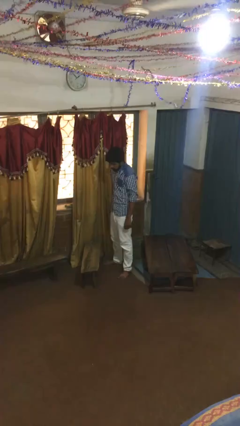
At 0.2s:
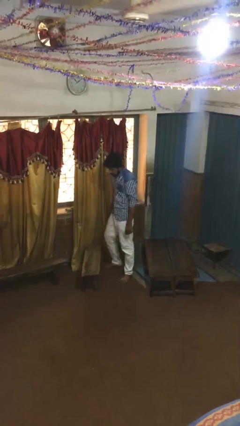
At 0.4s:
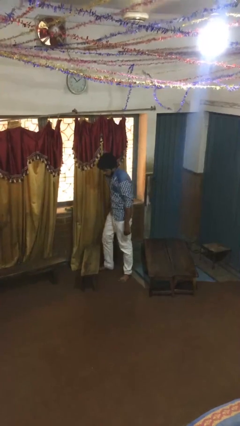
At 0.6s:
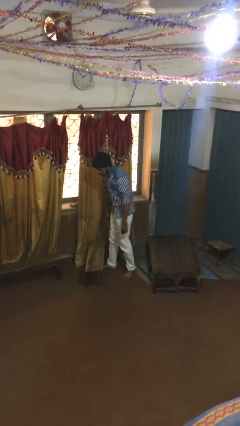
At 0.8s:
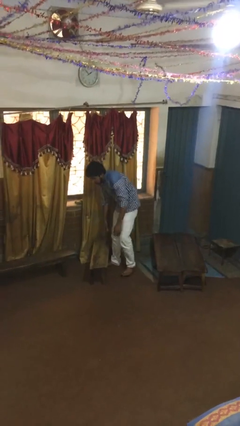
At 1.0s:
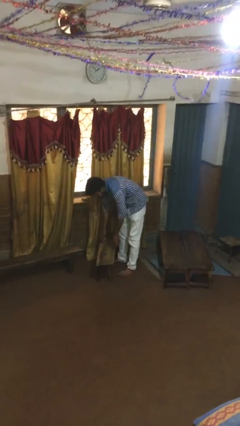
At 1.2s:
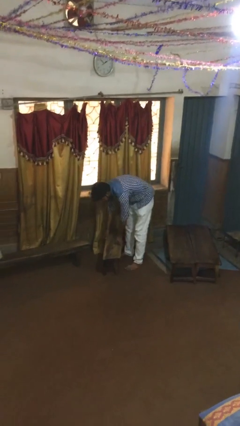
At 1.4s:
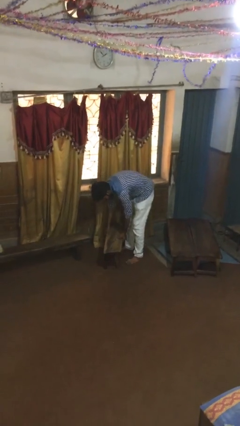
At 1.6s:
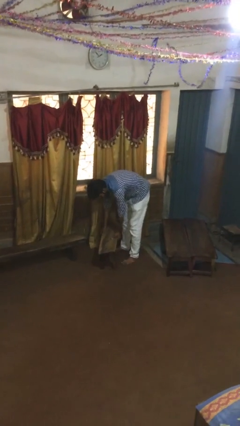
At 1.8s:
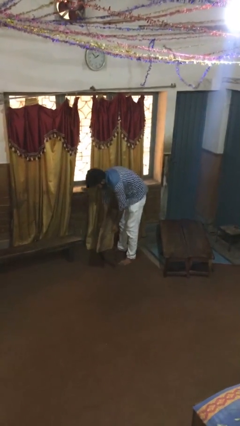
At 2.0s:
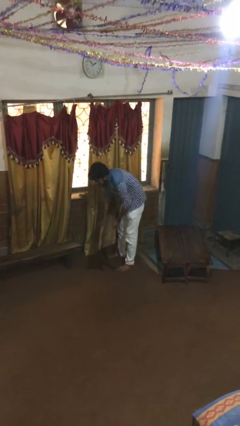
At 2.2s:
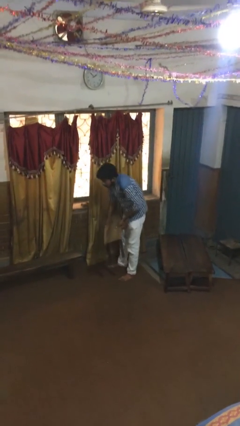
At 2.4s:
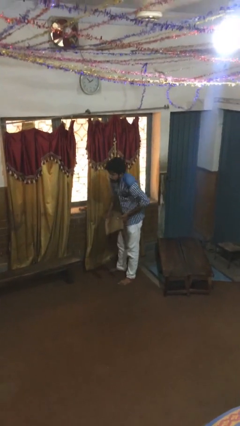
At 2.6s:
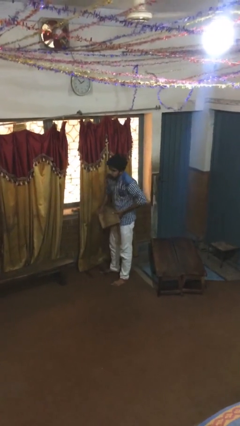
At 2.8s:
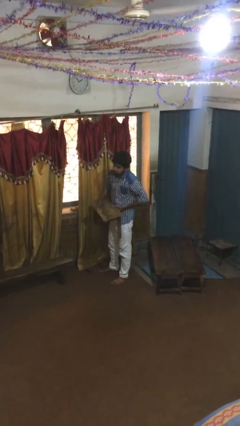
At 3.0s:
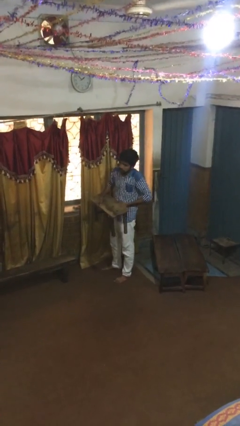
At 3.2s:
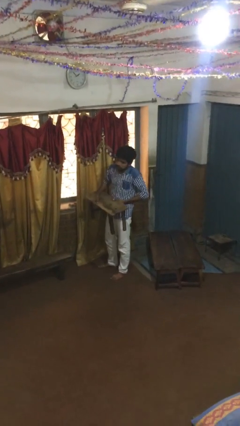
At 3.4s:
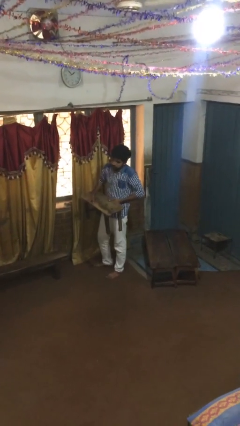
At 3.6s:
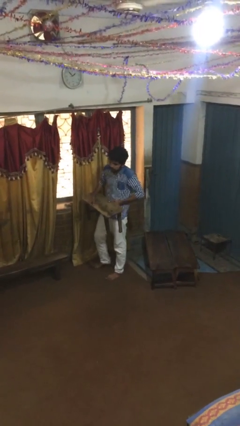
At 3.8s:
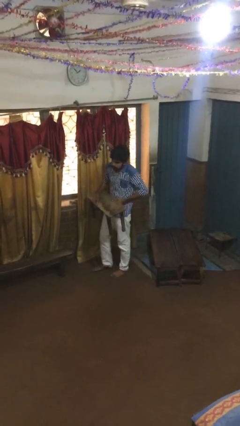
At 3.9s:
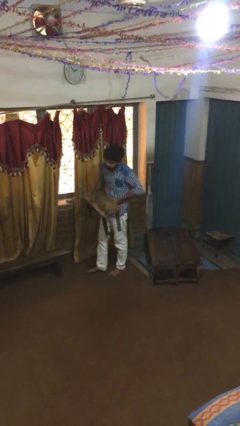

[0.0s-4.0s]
person picks up object from floor

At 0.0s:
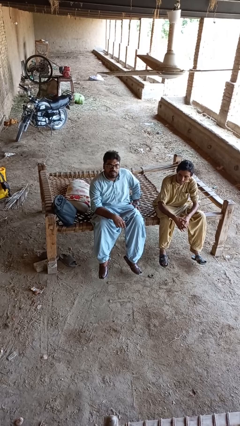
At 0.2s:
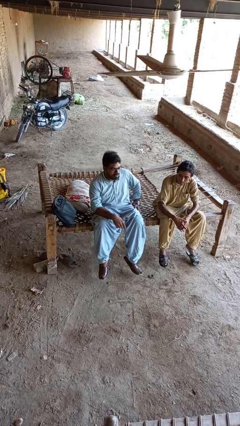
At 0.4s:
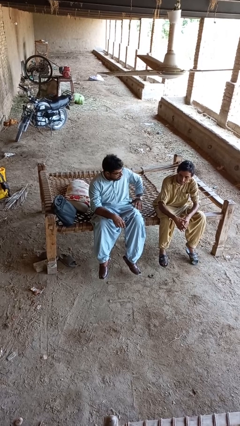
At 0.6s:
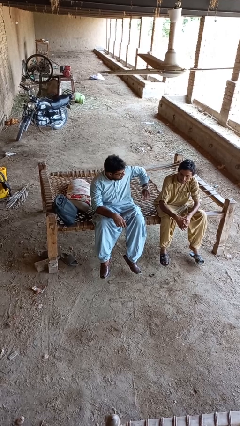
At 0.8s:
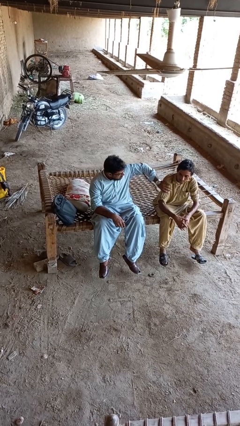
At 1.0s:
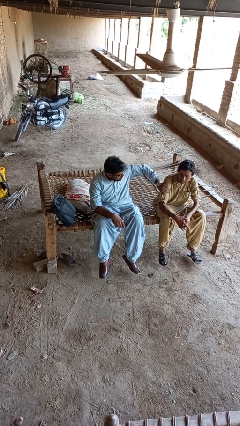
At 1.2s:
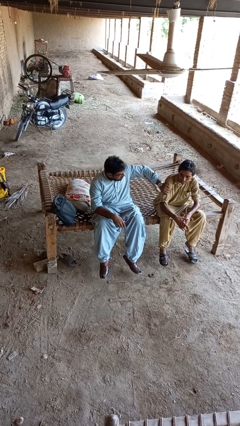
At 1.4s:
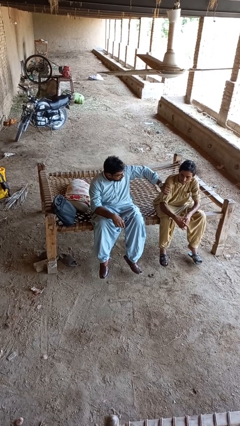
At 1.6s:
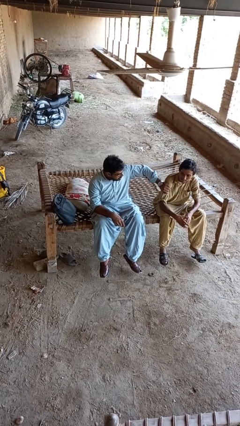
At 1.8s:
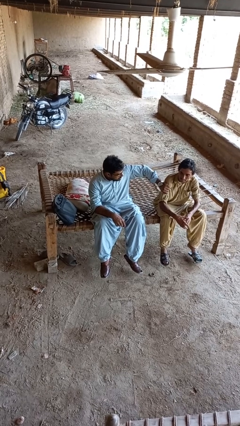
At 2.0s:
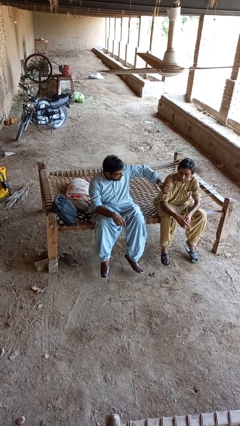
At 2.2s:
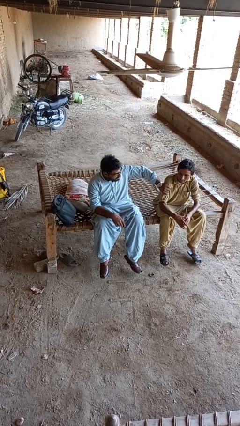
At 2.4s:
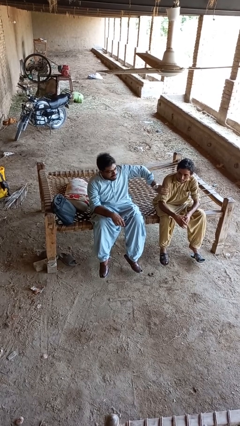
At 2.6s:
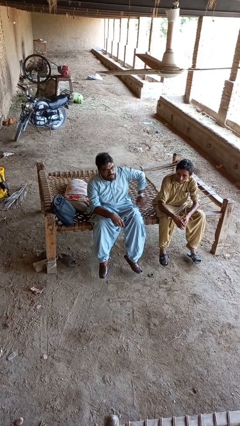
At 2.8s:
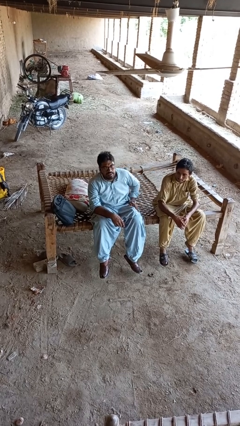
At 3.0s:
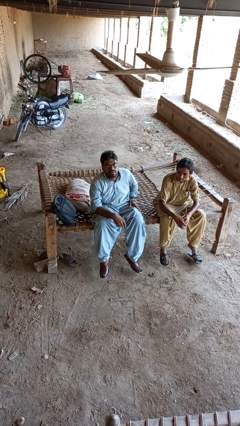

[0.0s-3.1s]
person grabs person by bicep

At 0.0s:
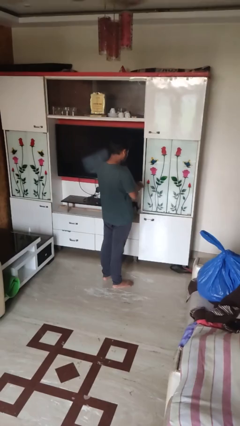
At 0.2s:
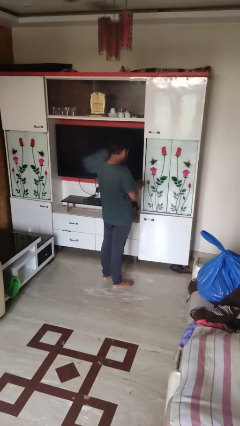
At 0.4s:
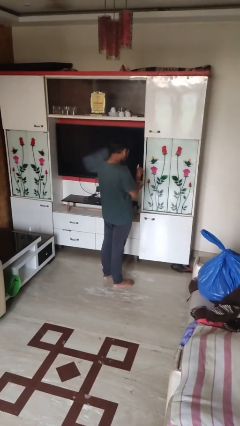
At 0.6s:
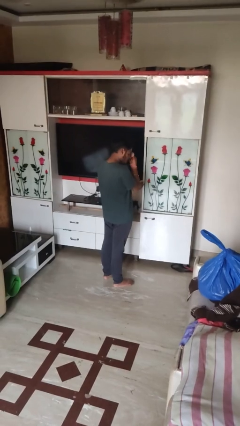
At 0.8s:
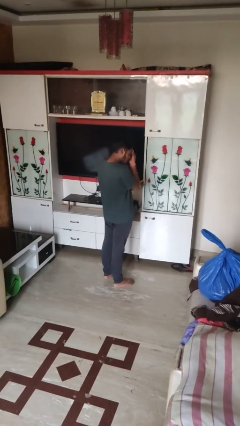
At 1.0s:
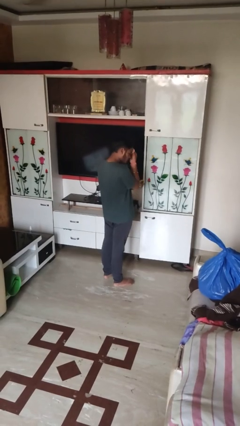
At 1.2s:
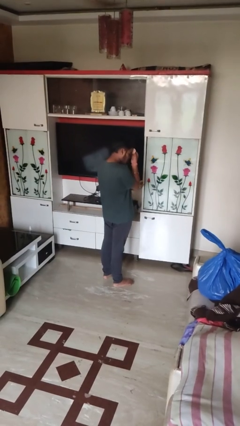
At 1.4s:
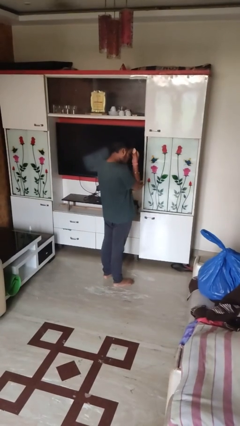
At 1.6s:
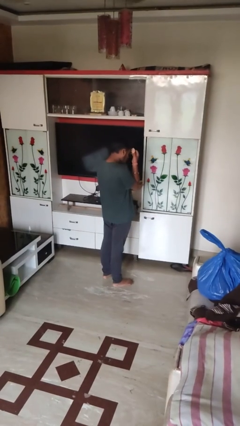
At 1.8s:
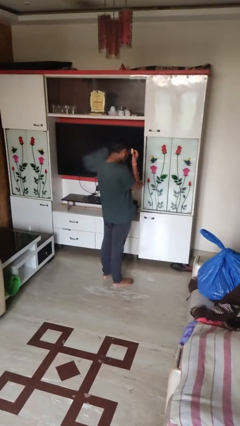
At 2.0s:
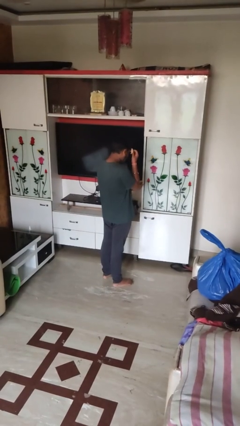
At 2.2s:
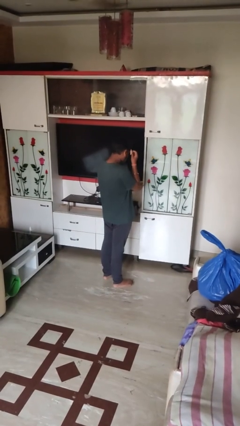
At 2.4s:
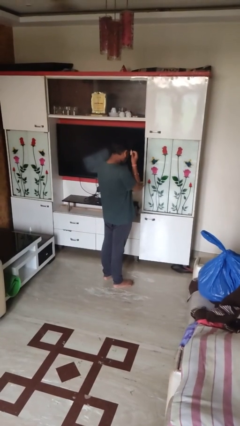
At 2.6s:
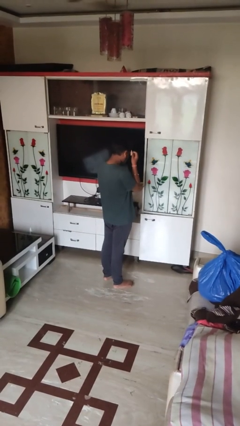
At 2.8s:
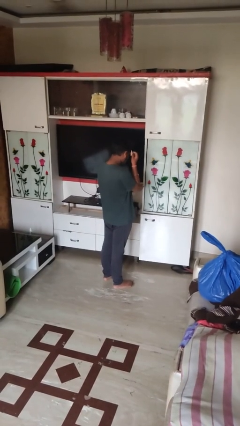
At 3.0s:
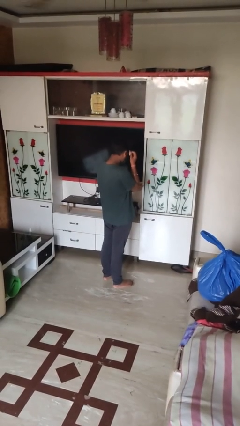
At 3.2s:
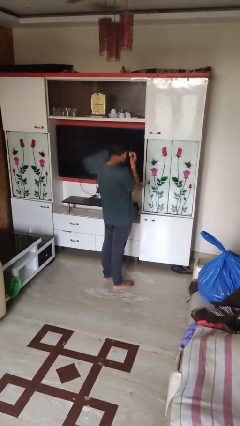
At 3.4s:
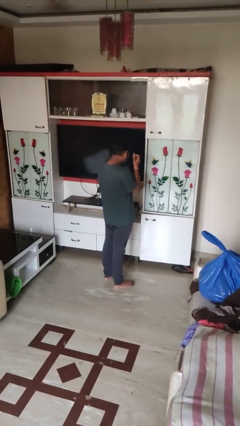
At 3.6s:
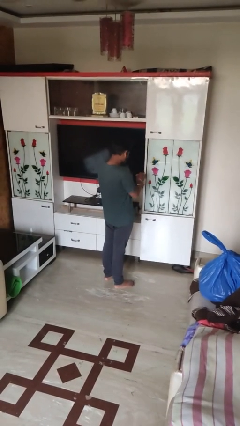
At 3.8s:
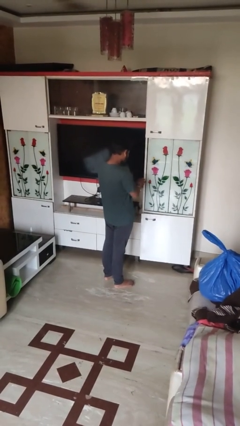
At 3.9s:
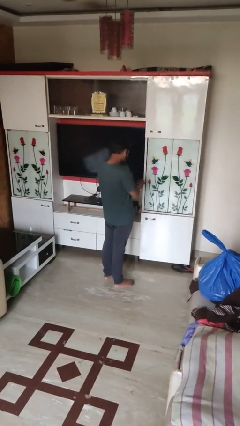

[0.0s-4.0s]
person applies foundation makeup

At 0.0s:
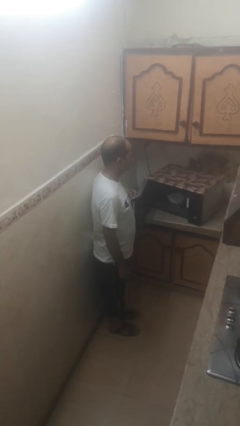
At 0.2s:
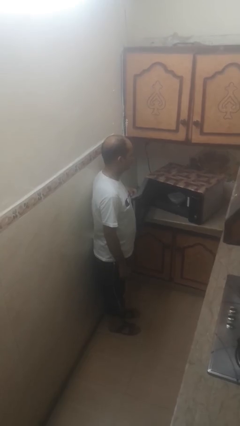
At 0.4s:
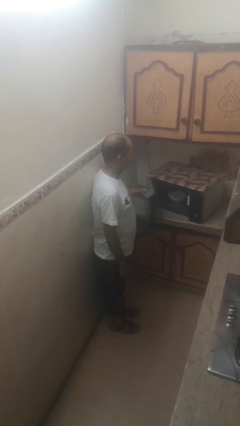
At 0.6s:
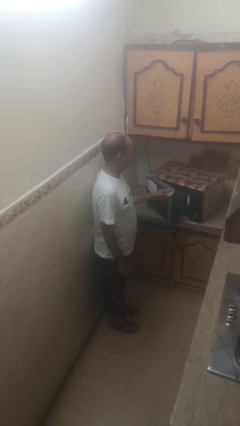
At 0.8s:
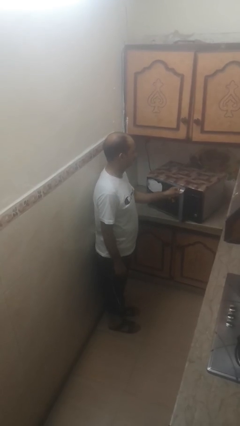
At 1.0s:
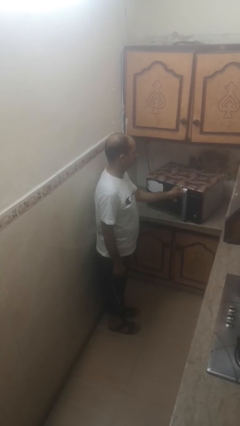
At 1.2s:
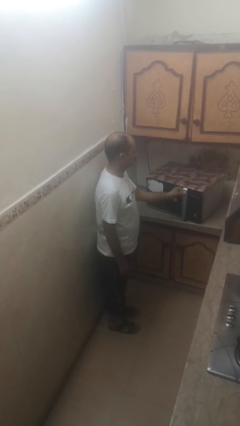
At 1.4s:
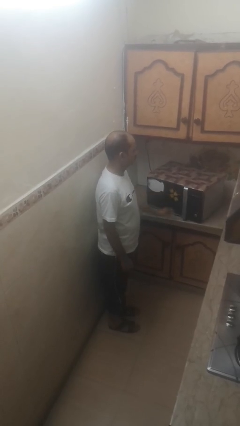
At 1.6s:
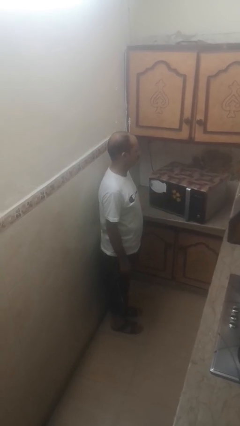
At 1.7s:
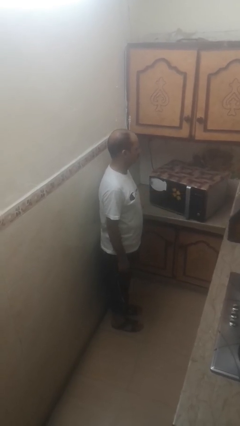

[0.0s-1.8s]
person closes microwave

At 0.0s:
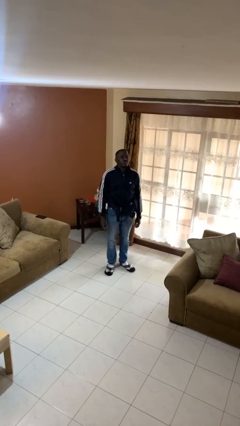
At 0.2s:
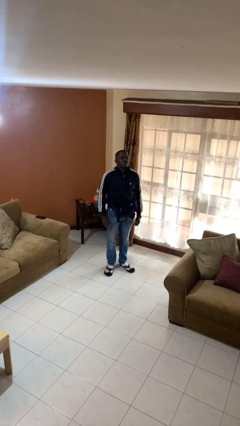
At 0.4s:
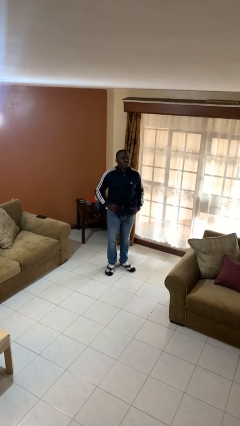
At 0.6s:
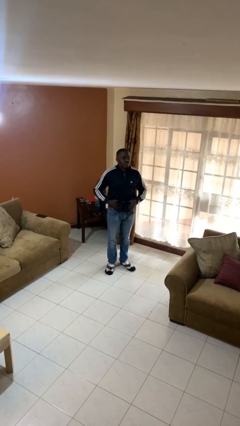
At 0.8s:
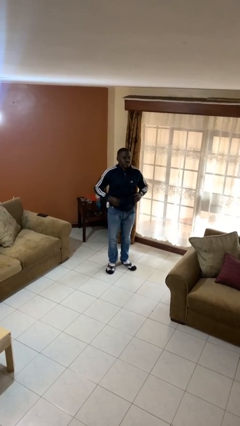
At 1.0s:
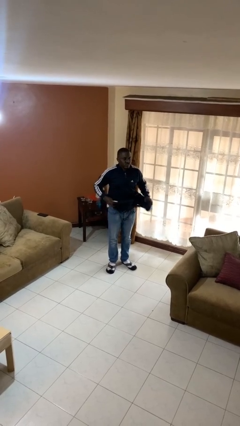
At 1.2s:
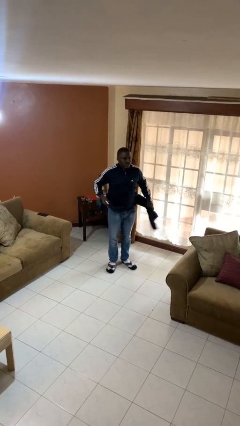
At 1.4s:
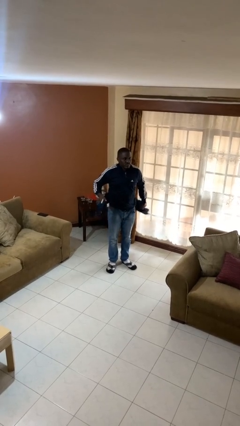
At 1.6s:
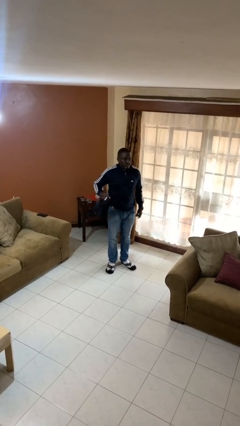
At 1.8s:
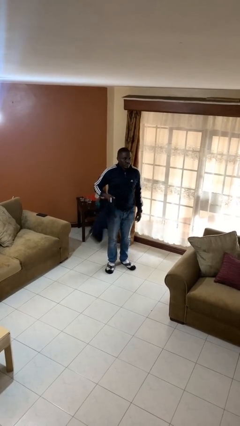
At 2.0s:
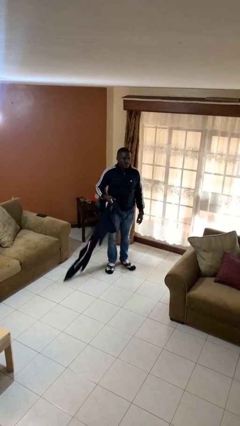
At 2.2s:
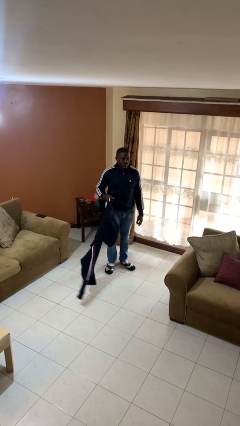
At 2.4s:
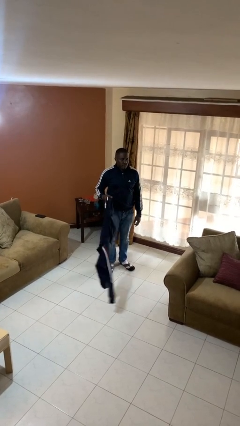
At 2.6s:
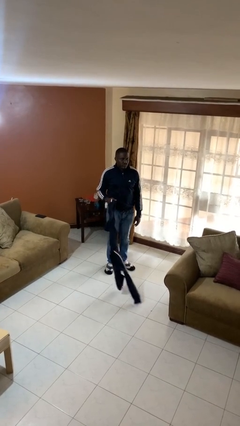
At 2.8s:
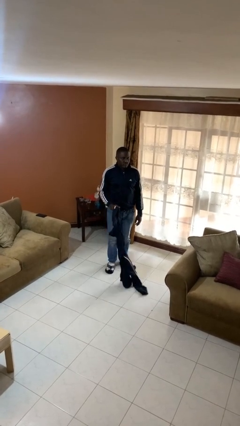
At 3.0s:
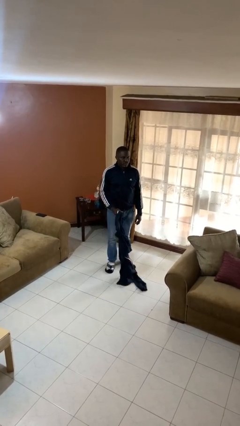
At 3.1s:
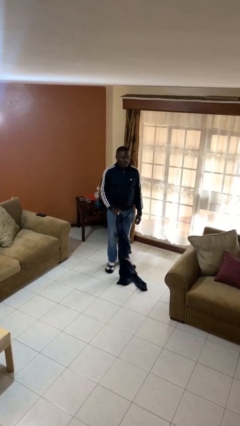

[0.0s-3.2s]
person unties jacket around waist

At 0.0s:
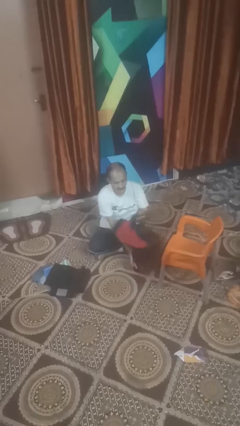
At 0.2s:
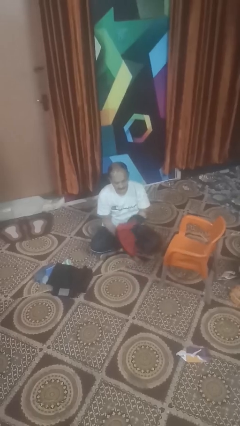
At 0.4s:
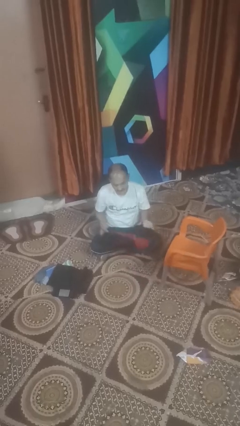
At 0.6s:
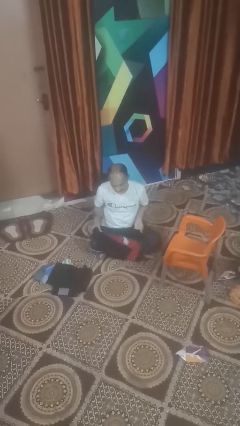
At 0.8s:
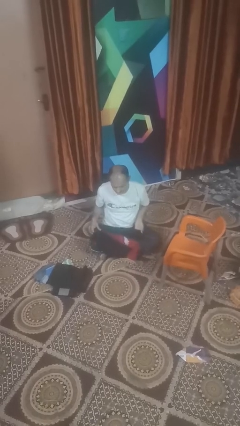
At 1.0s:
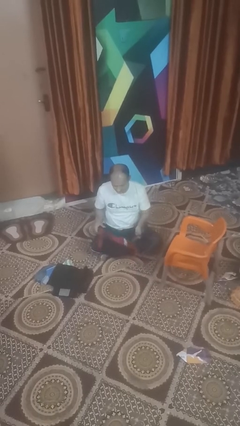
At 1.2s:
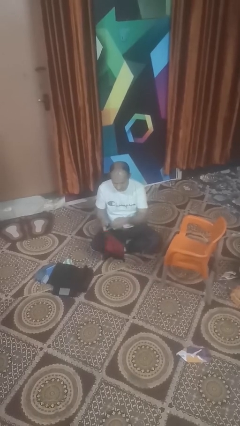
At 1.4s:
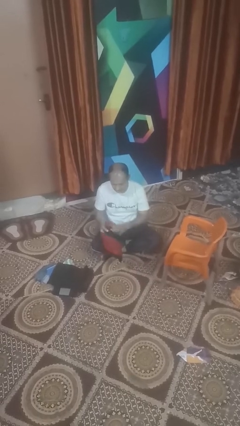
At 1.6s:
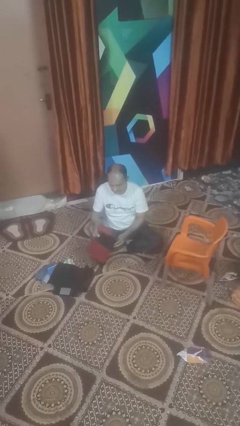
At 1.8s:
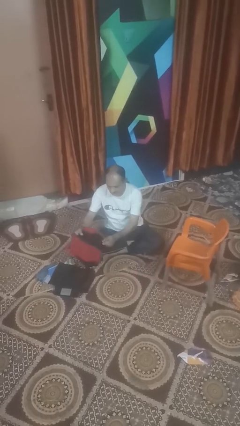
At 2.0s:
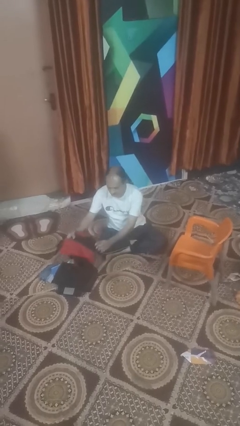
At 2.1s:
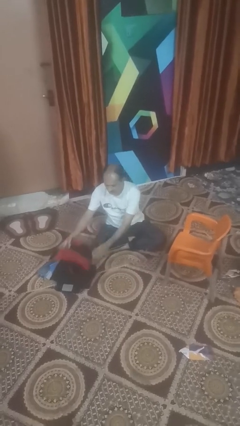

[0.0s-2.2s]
person folds shirt
